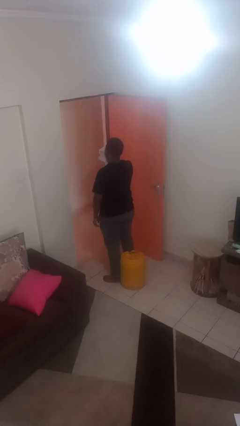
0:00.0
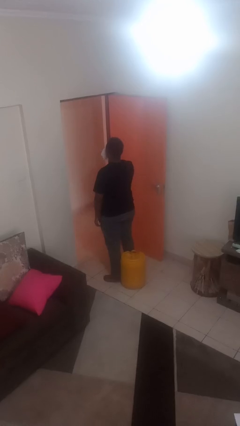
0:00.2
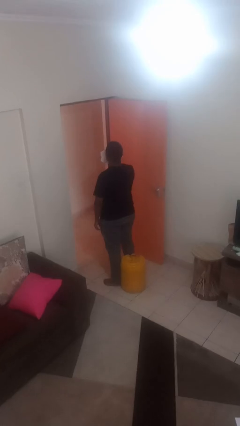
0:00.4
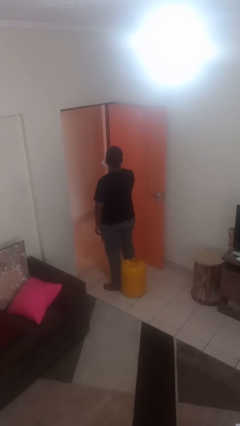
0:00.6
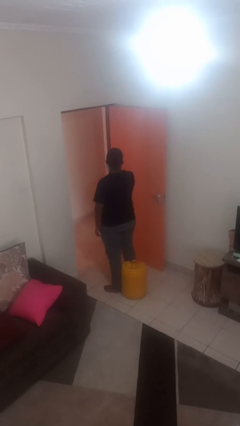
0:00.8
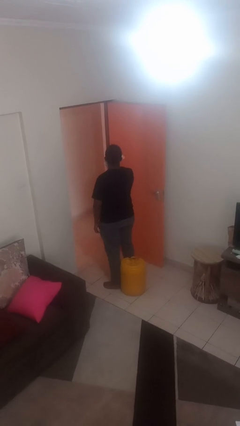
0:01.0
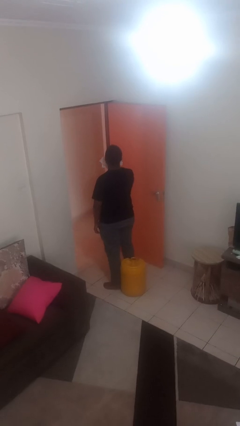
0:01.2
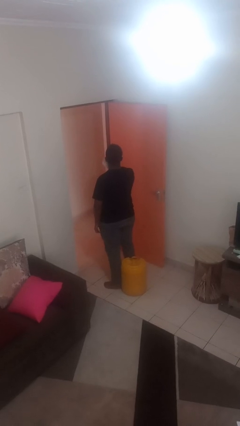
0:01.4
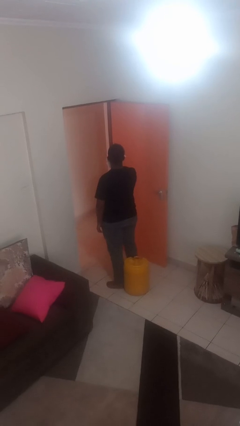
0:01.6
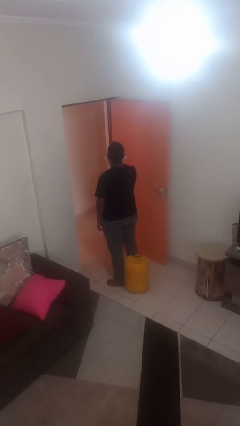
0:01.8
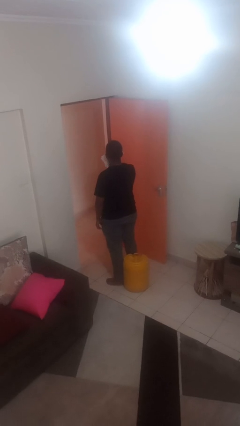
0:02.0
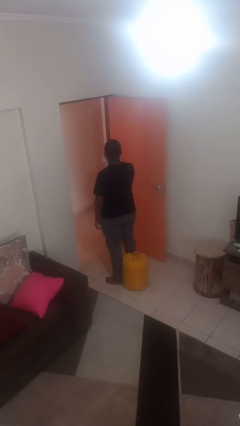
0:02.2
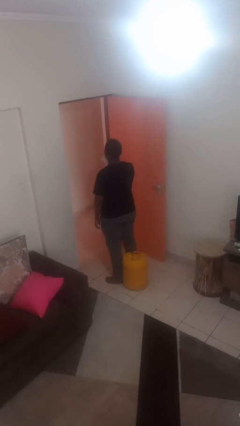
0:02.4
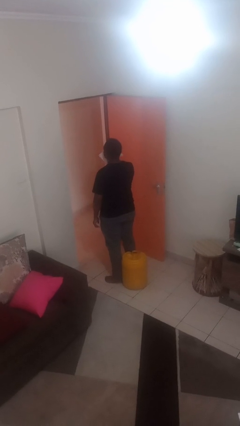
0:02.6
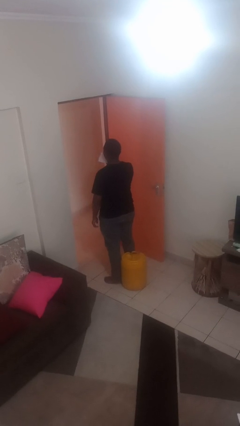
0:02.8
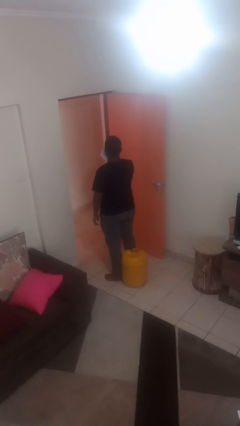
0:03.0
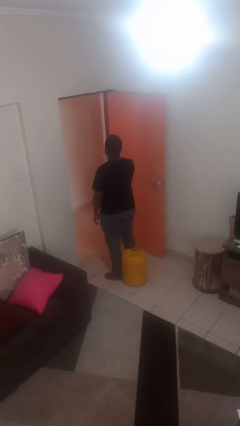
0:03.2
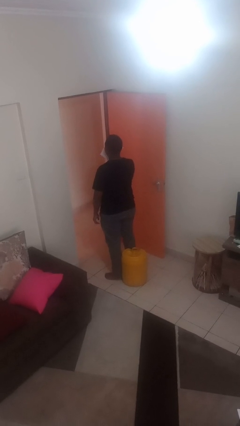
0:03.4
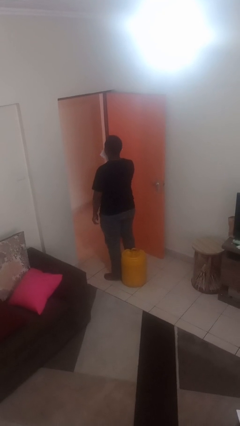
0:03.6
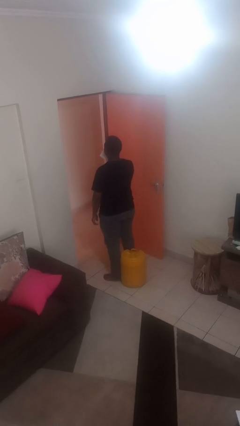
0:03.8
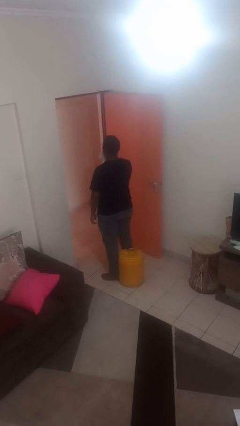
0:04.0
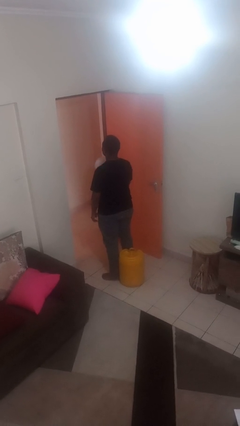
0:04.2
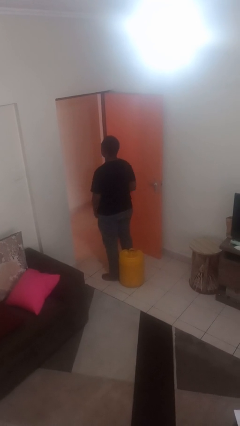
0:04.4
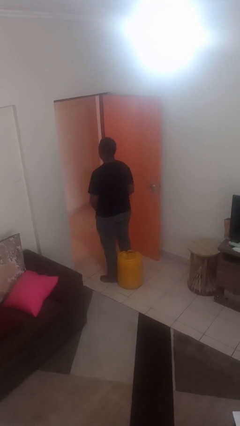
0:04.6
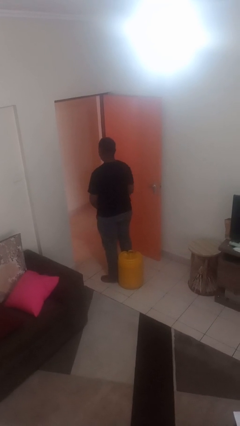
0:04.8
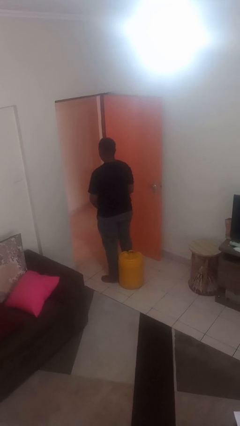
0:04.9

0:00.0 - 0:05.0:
person wipes mouth with napkin

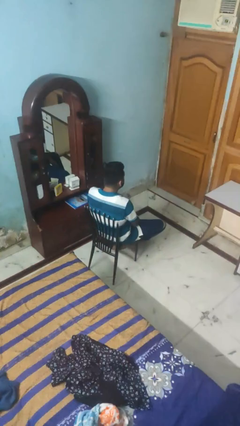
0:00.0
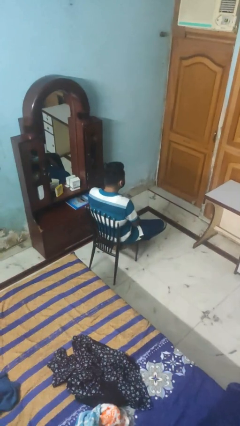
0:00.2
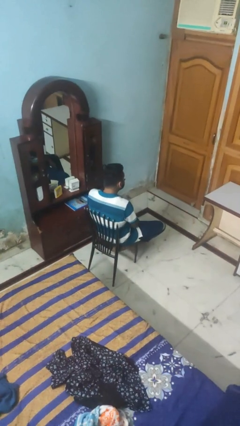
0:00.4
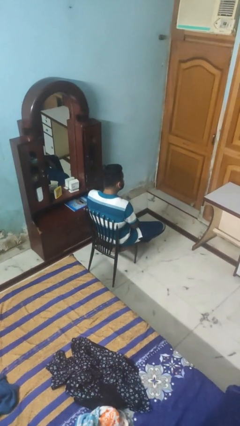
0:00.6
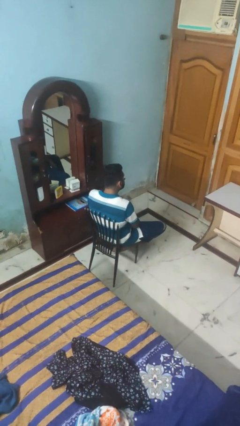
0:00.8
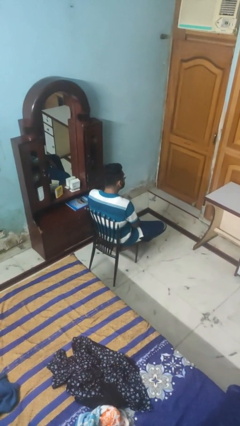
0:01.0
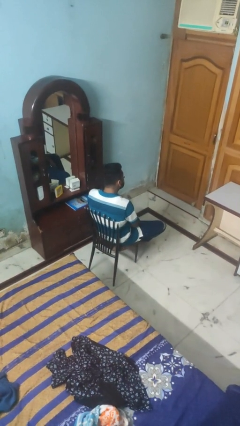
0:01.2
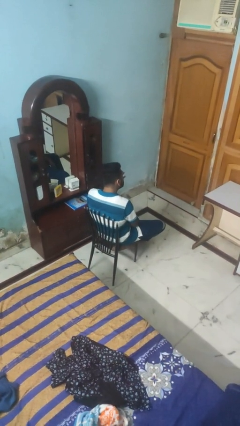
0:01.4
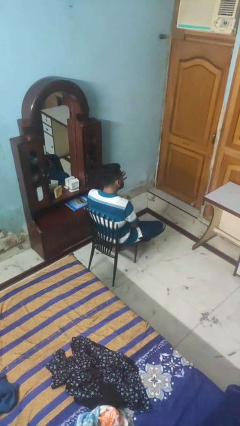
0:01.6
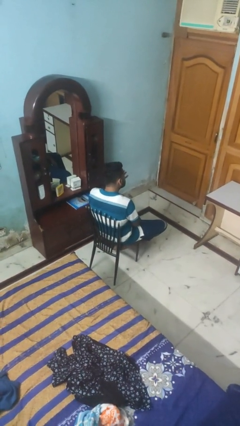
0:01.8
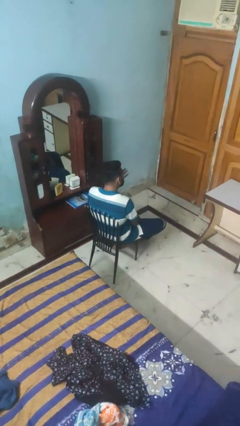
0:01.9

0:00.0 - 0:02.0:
person rubs eyes

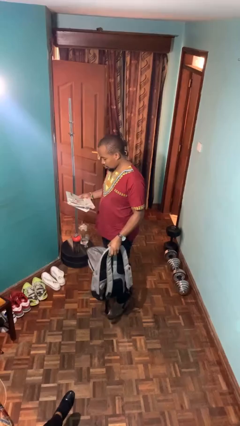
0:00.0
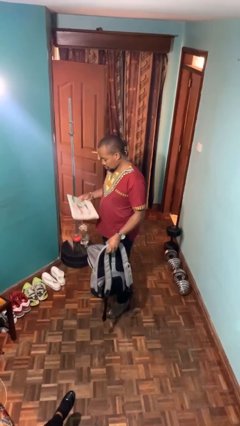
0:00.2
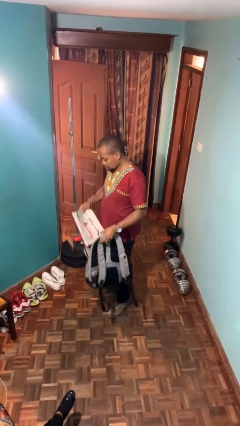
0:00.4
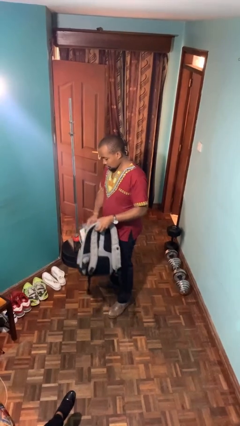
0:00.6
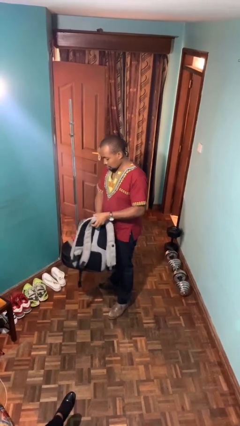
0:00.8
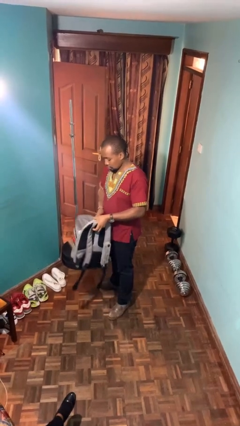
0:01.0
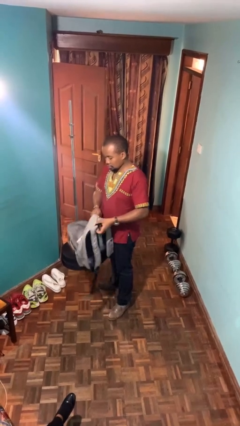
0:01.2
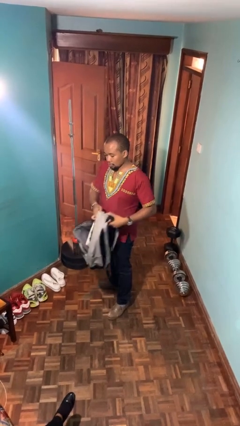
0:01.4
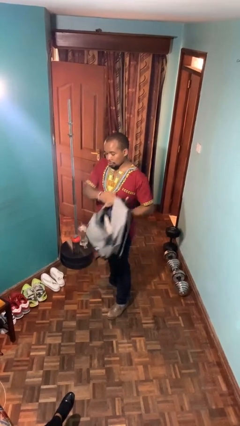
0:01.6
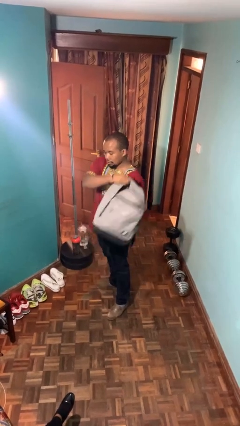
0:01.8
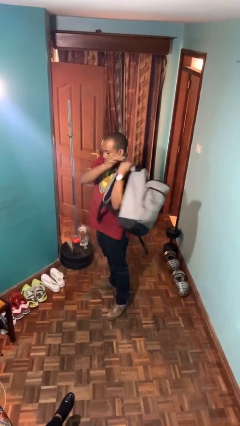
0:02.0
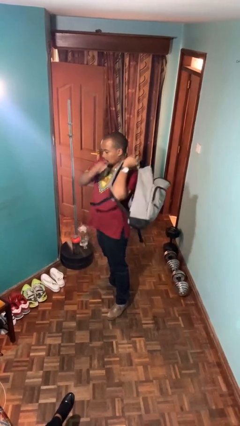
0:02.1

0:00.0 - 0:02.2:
person puts object into backpack

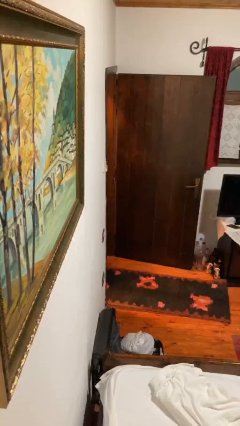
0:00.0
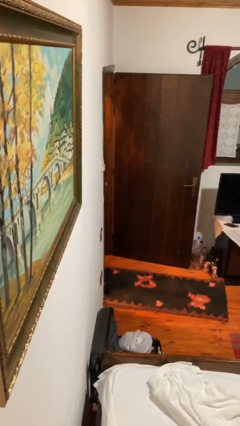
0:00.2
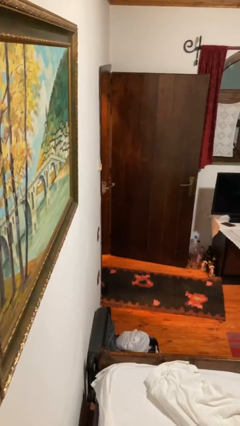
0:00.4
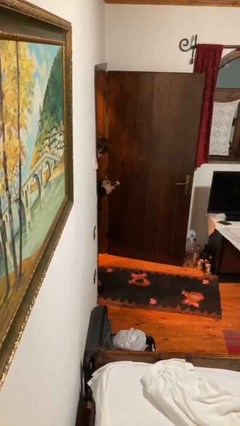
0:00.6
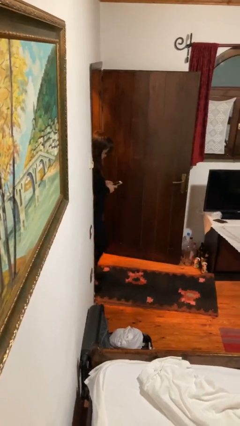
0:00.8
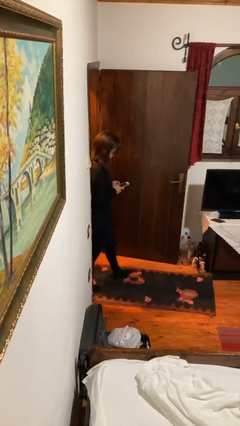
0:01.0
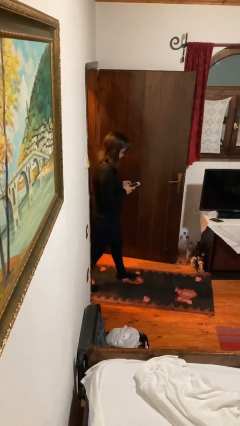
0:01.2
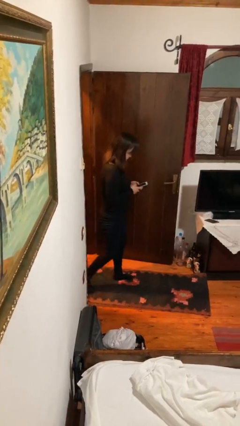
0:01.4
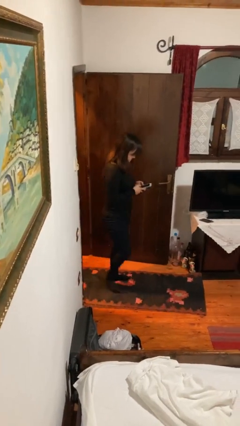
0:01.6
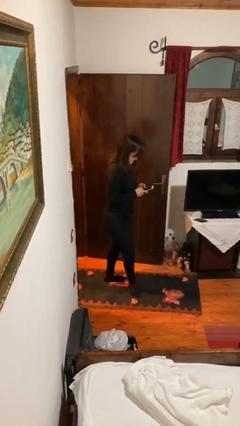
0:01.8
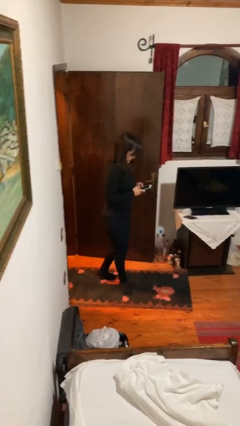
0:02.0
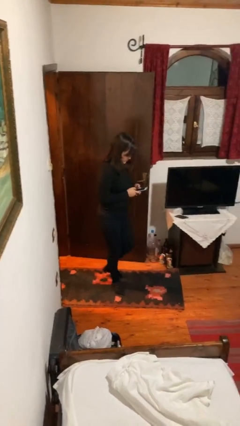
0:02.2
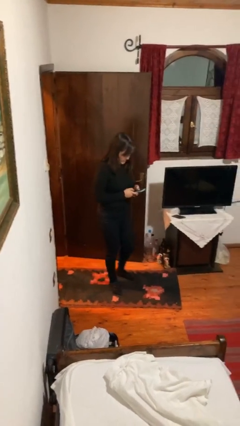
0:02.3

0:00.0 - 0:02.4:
person enters scene through structure

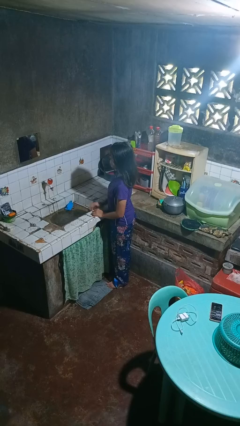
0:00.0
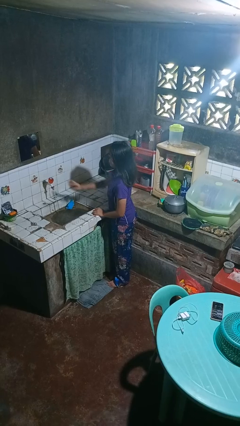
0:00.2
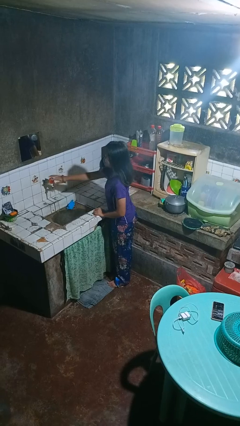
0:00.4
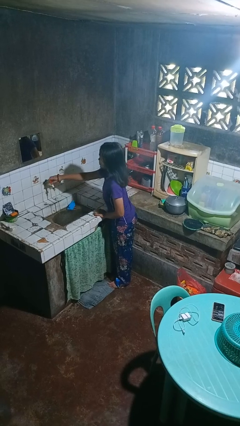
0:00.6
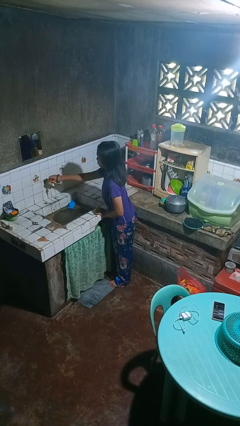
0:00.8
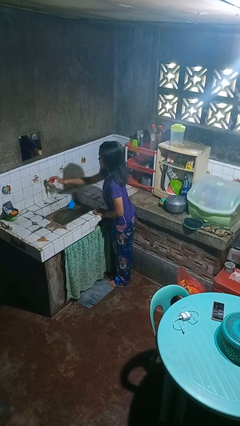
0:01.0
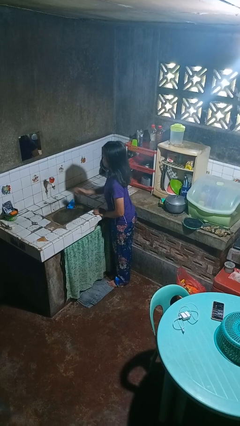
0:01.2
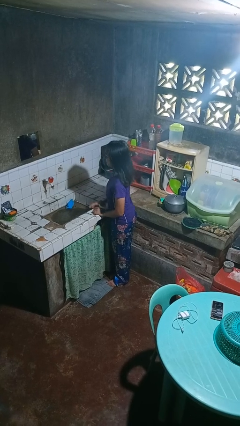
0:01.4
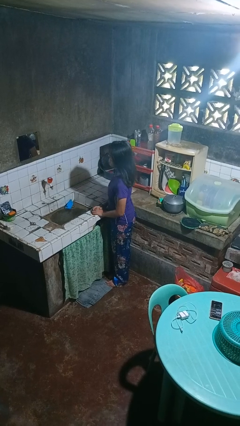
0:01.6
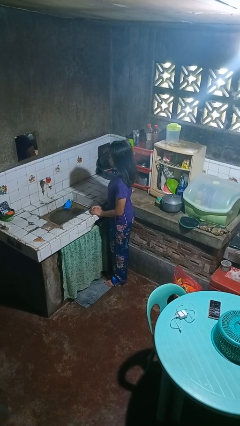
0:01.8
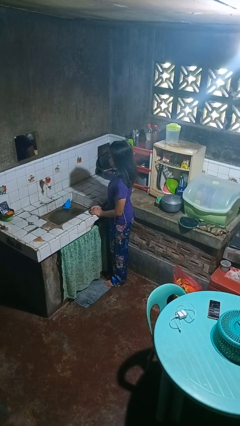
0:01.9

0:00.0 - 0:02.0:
person turns off faucet

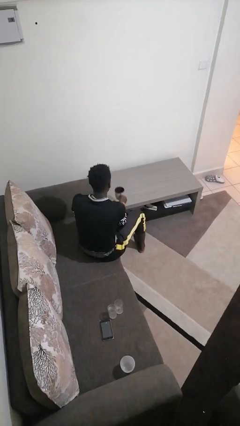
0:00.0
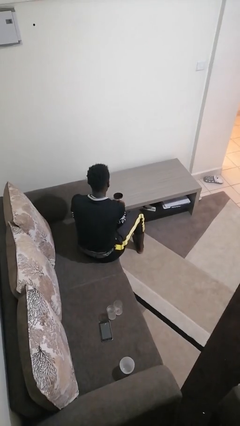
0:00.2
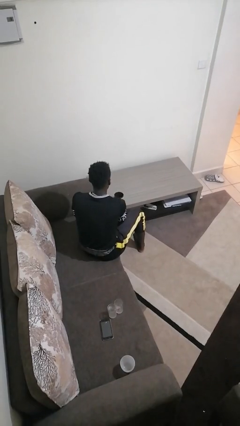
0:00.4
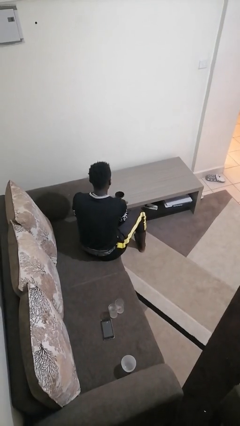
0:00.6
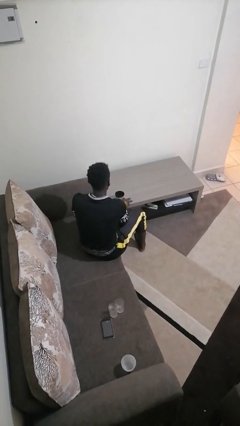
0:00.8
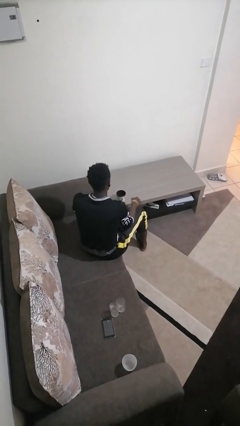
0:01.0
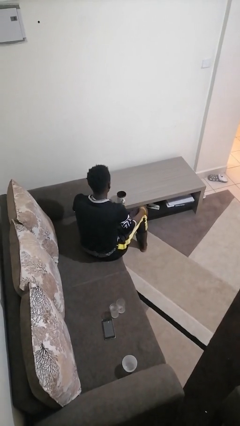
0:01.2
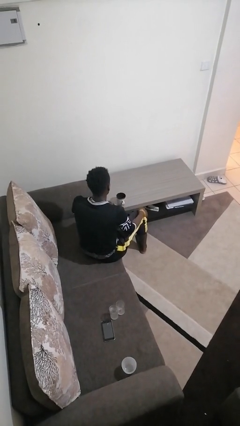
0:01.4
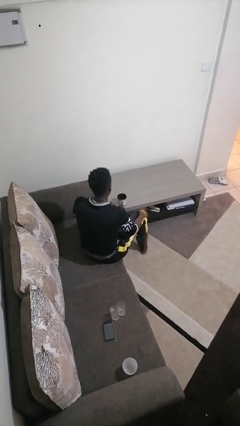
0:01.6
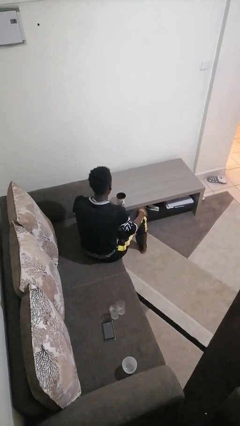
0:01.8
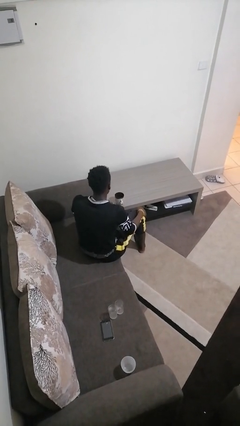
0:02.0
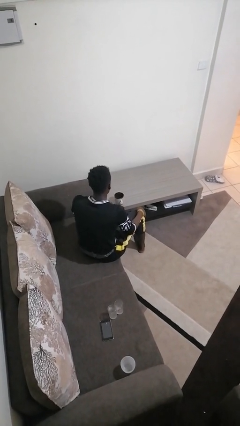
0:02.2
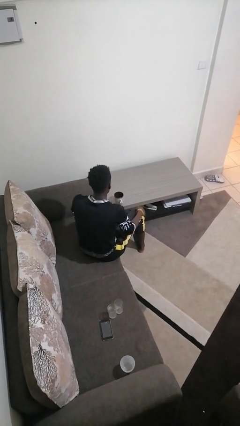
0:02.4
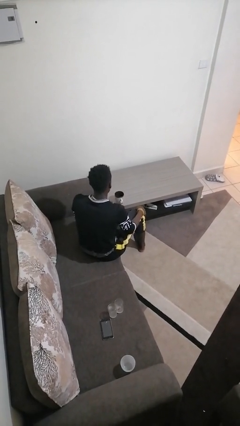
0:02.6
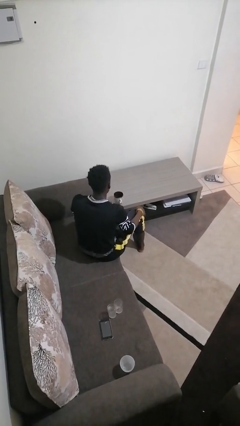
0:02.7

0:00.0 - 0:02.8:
person puts down object on table

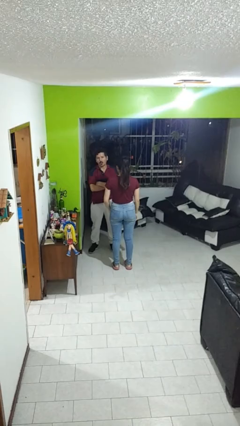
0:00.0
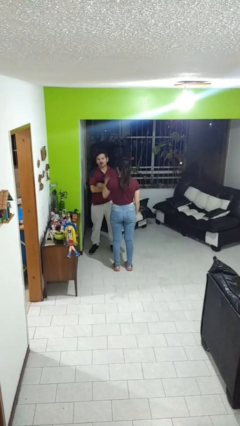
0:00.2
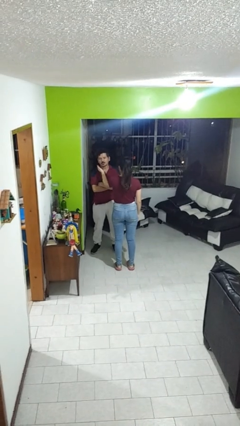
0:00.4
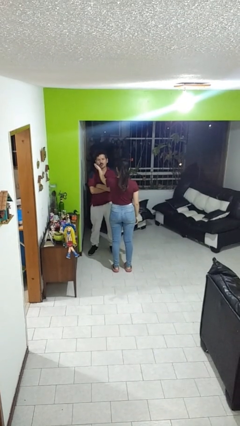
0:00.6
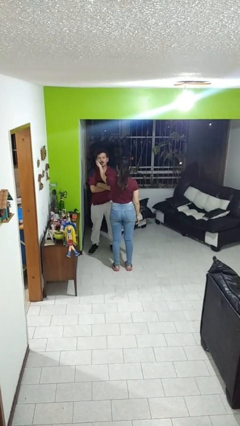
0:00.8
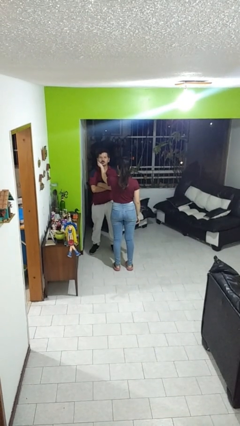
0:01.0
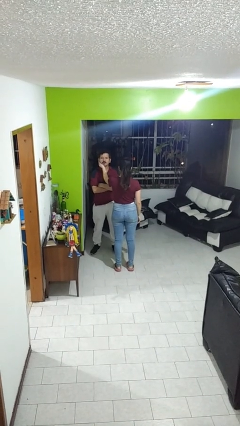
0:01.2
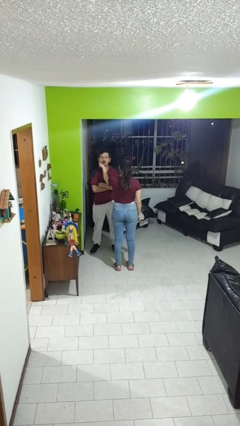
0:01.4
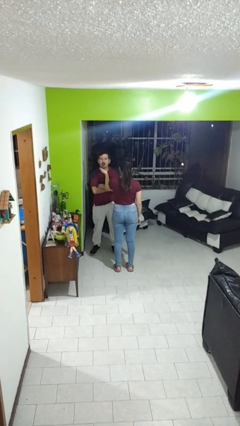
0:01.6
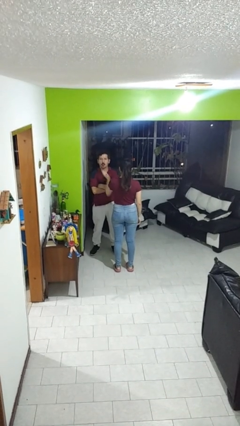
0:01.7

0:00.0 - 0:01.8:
person touches face of person
